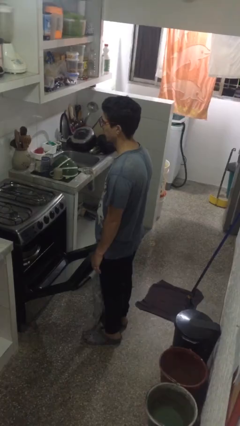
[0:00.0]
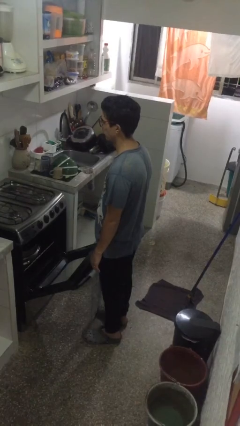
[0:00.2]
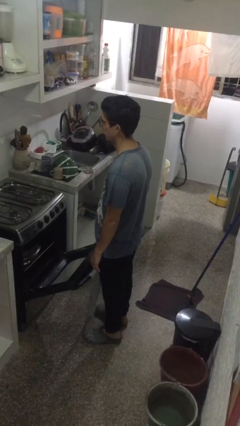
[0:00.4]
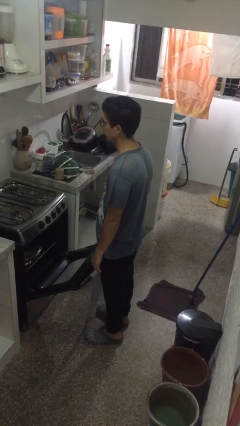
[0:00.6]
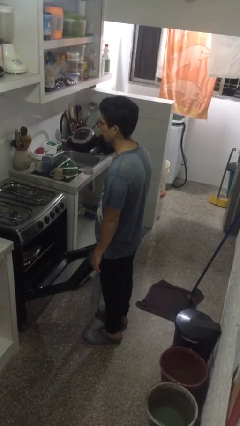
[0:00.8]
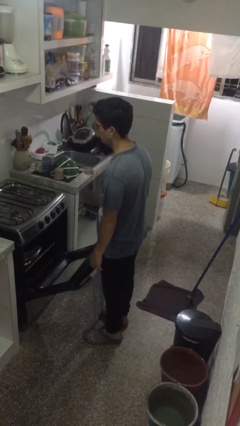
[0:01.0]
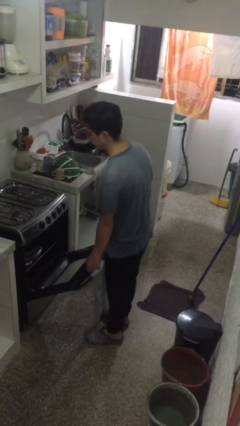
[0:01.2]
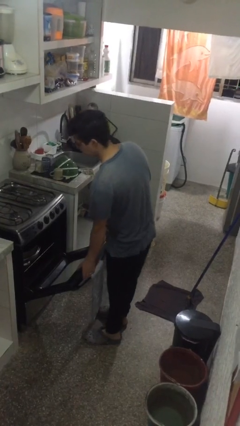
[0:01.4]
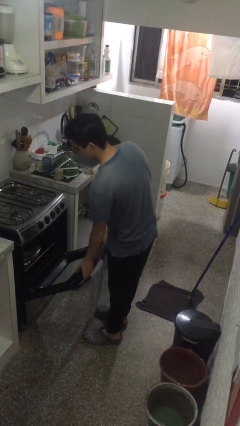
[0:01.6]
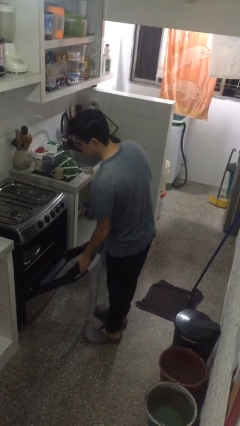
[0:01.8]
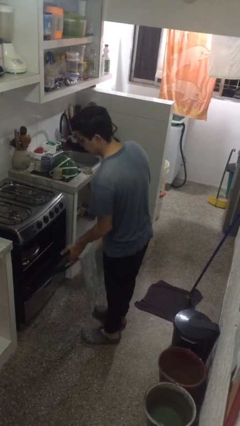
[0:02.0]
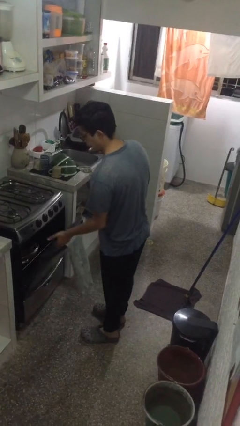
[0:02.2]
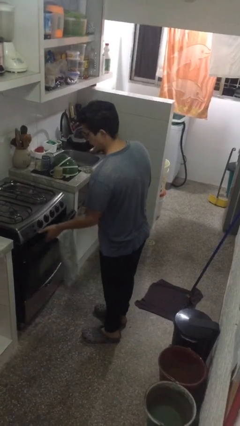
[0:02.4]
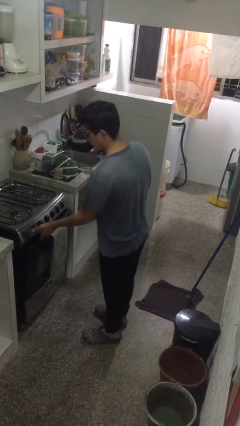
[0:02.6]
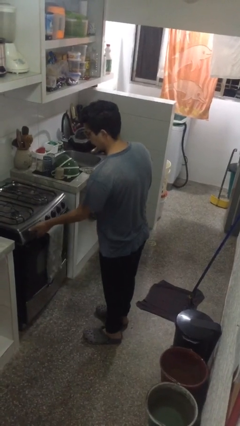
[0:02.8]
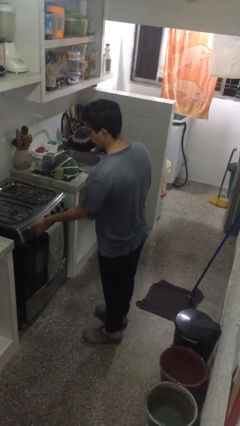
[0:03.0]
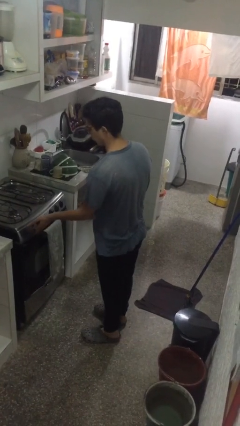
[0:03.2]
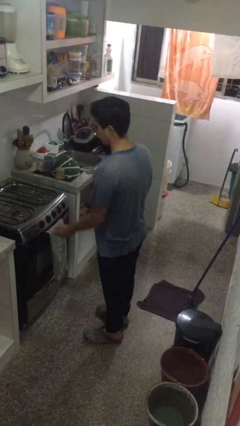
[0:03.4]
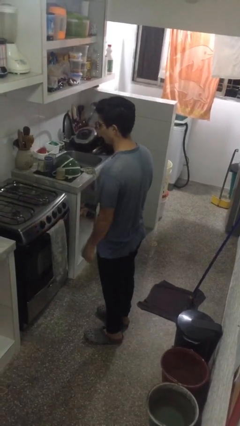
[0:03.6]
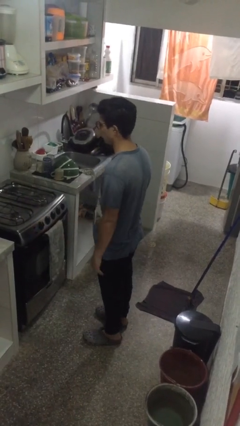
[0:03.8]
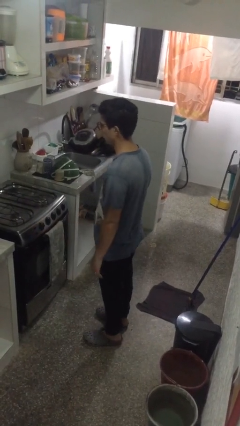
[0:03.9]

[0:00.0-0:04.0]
person closes oven door

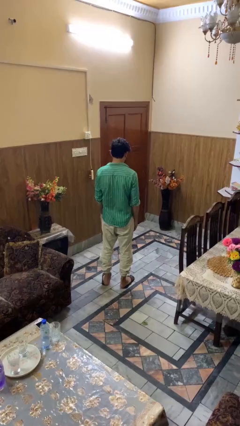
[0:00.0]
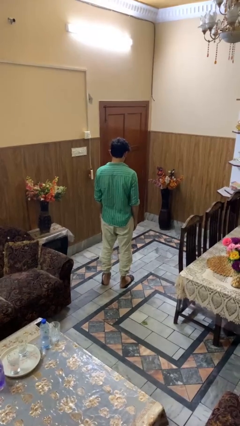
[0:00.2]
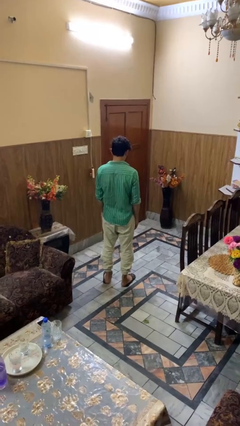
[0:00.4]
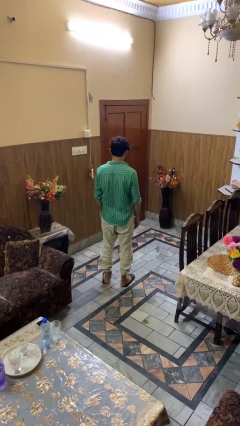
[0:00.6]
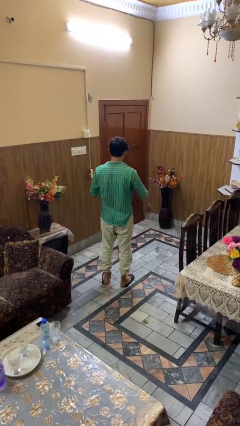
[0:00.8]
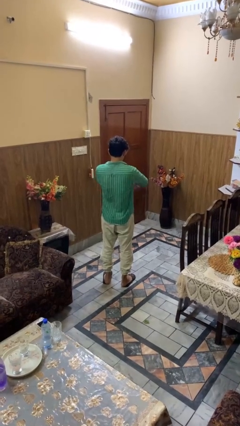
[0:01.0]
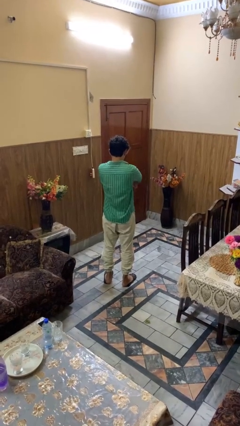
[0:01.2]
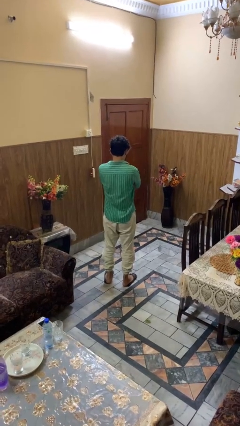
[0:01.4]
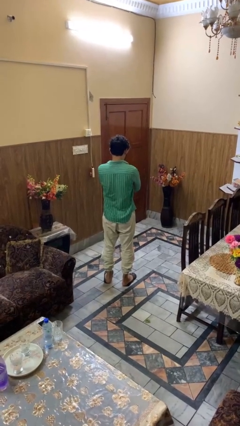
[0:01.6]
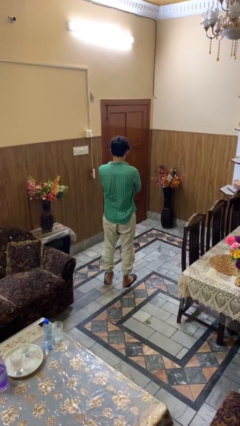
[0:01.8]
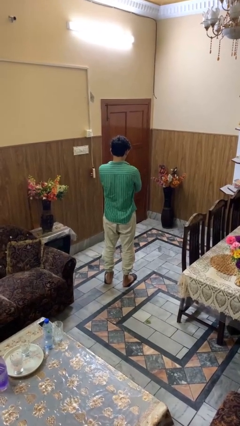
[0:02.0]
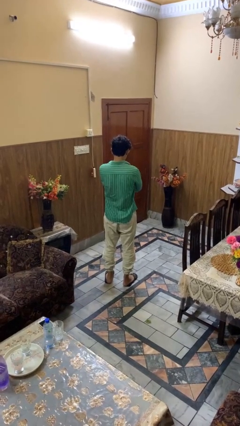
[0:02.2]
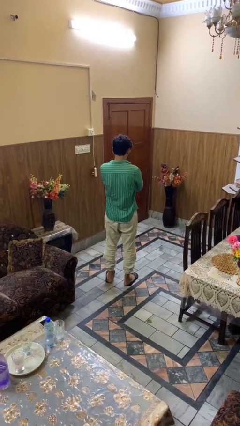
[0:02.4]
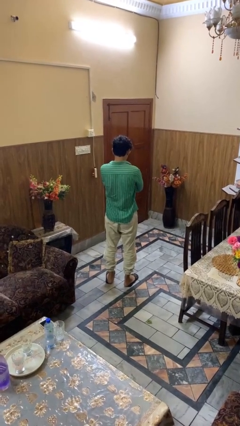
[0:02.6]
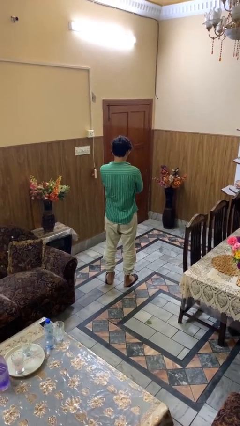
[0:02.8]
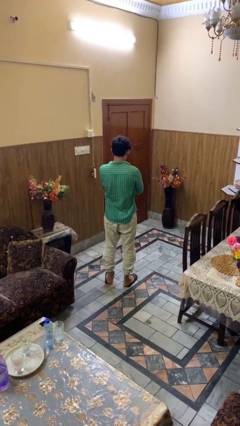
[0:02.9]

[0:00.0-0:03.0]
person crosses arms

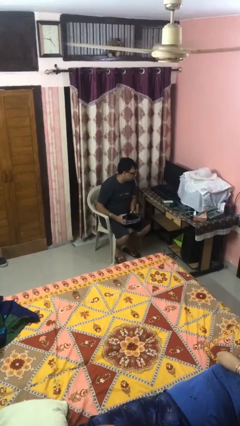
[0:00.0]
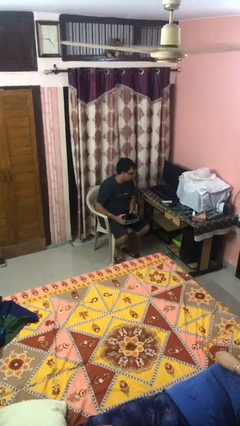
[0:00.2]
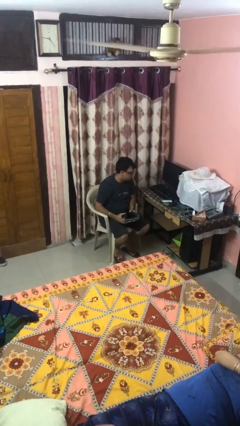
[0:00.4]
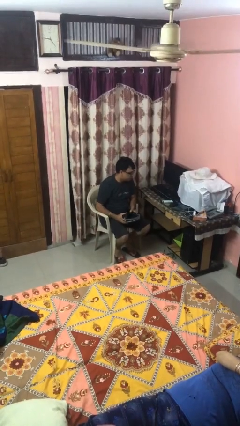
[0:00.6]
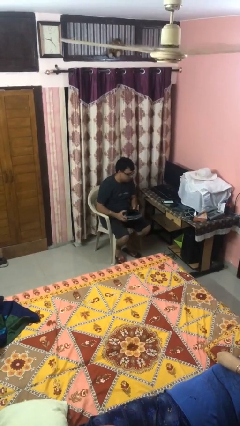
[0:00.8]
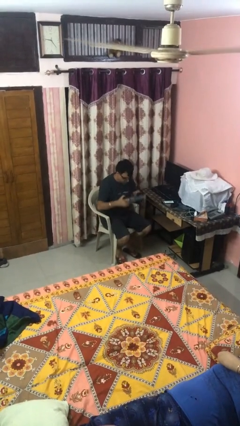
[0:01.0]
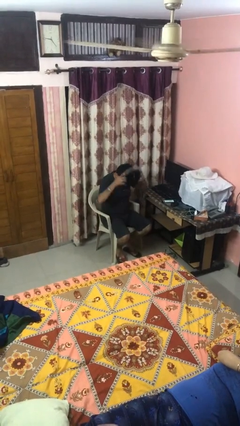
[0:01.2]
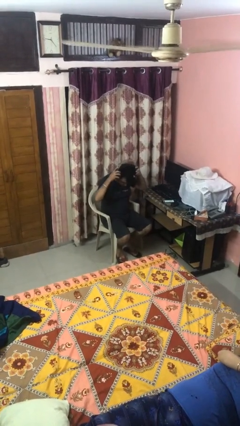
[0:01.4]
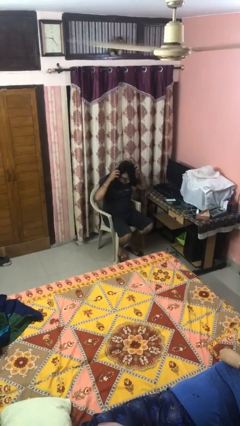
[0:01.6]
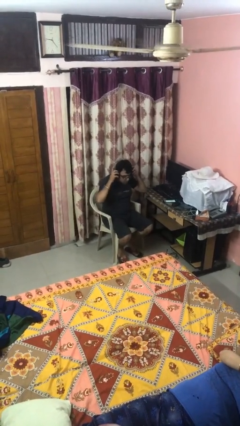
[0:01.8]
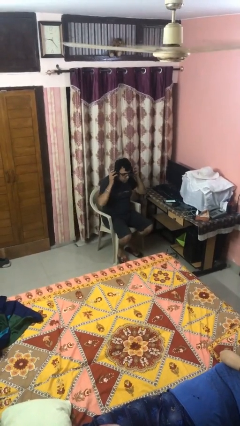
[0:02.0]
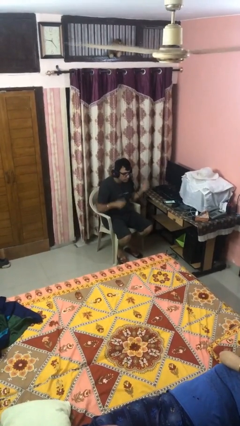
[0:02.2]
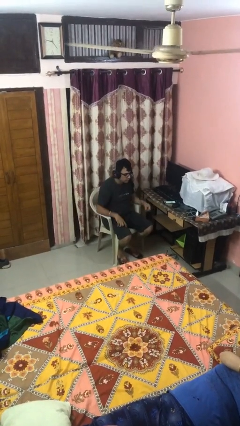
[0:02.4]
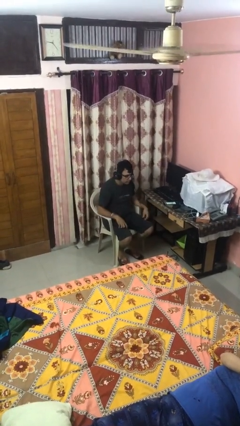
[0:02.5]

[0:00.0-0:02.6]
person puts on headphones

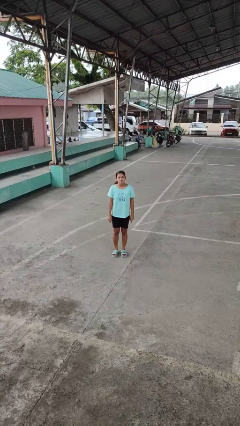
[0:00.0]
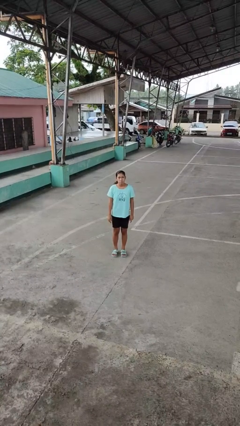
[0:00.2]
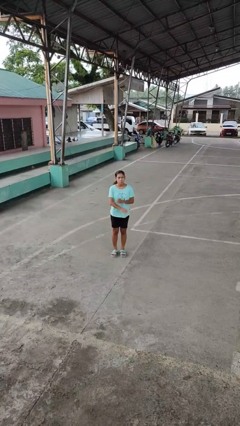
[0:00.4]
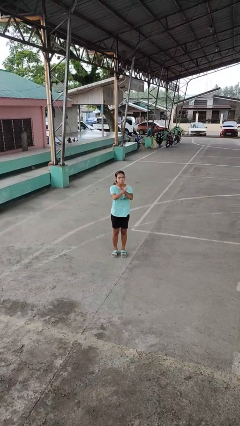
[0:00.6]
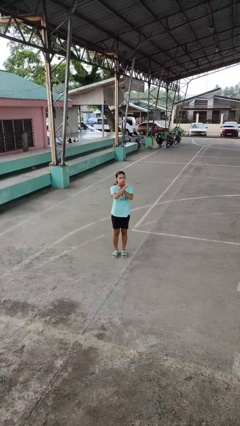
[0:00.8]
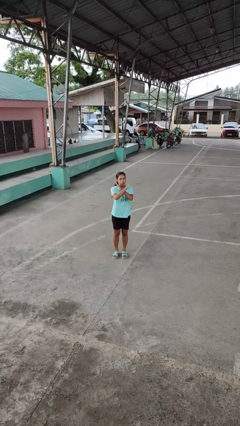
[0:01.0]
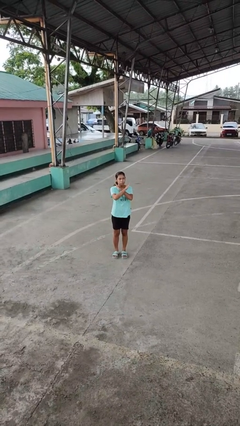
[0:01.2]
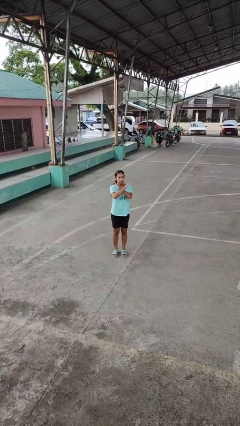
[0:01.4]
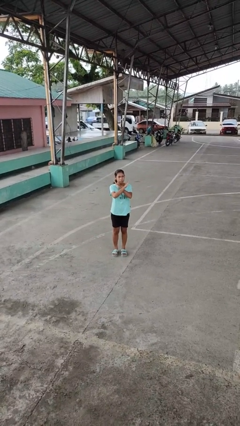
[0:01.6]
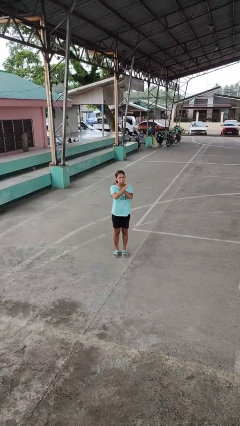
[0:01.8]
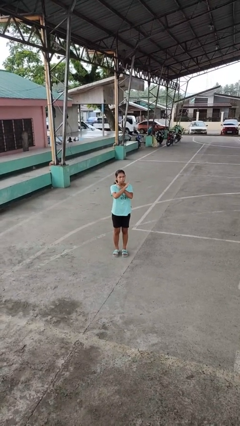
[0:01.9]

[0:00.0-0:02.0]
person gestures arms x

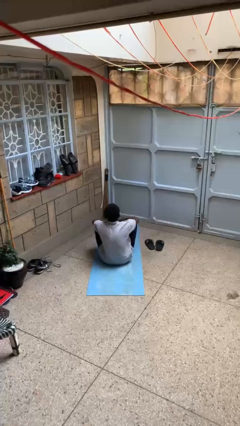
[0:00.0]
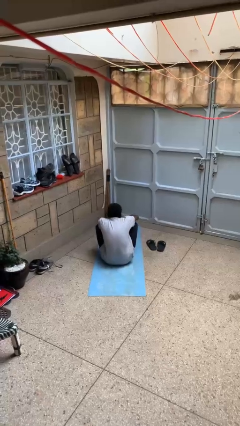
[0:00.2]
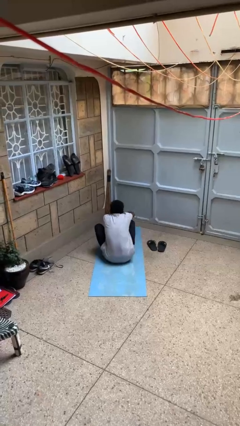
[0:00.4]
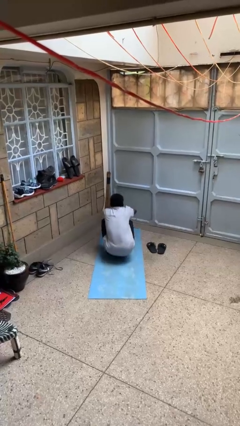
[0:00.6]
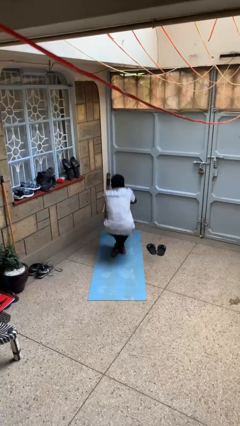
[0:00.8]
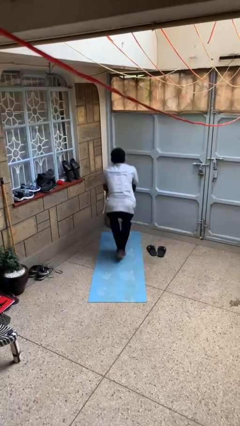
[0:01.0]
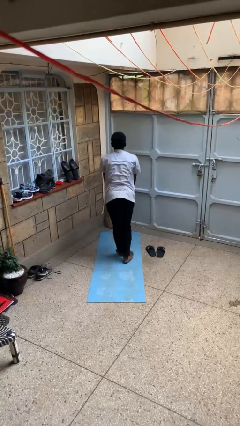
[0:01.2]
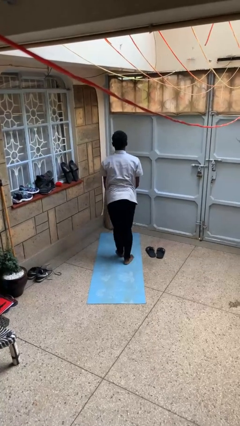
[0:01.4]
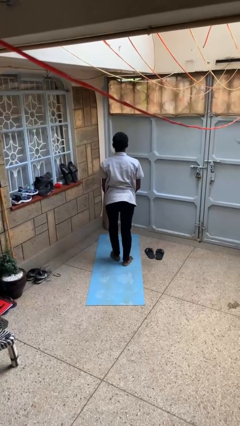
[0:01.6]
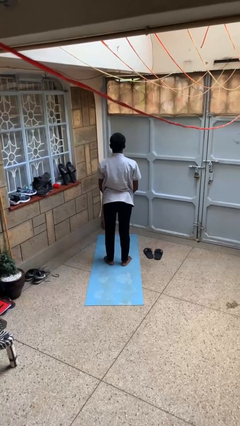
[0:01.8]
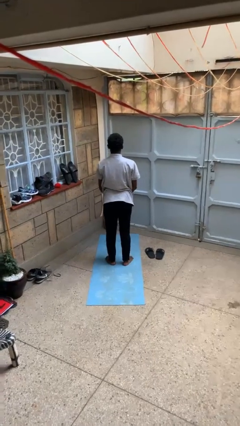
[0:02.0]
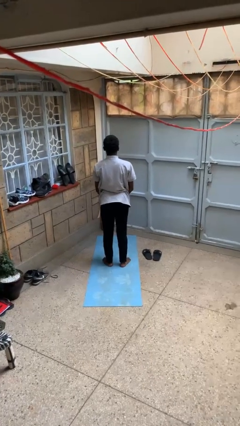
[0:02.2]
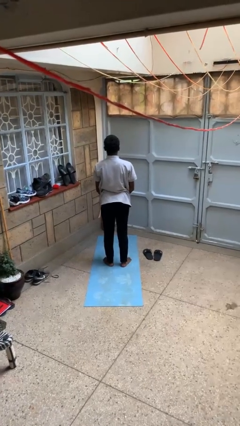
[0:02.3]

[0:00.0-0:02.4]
person stands up from floor

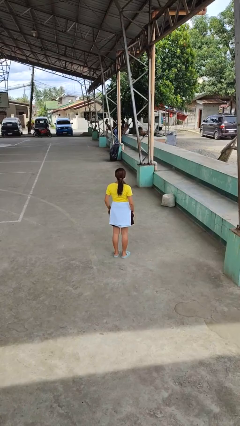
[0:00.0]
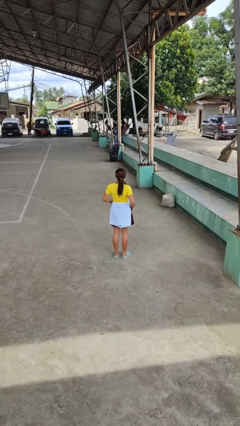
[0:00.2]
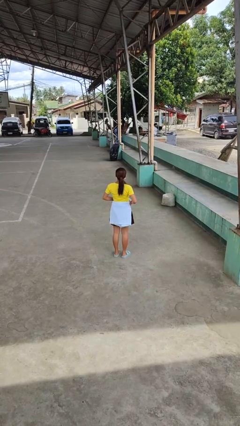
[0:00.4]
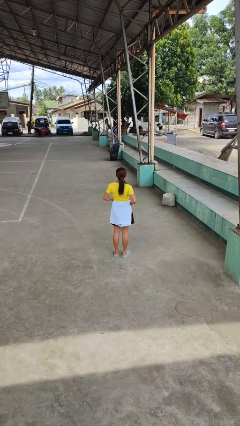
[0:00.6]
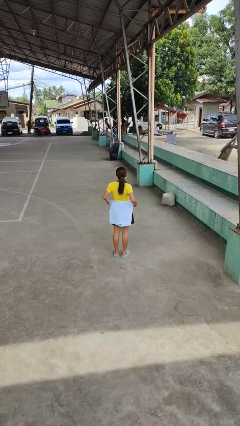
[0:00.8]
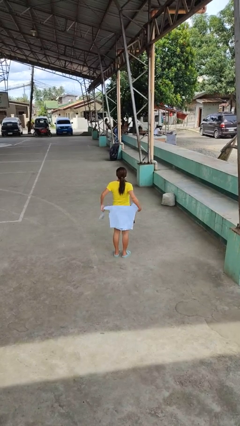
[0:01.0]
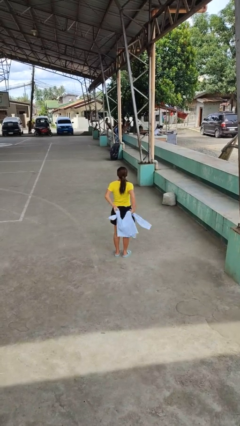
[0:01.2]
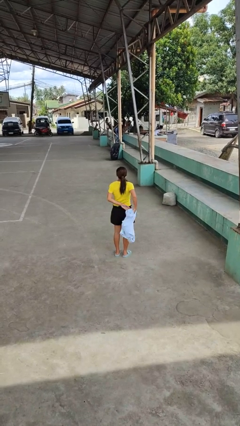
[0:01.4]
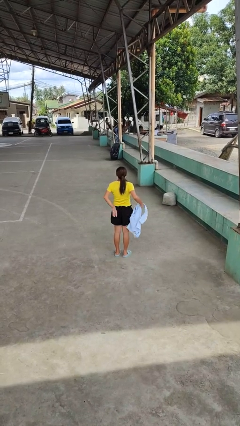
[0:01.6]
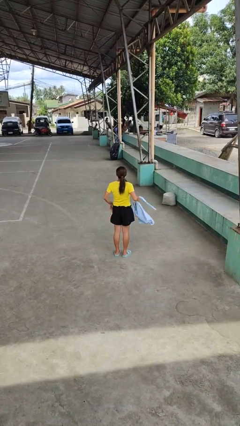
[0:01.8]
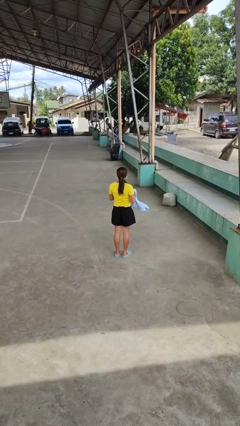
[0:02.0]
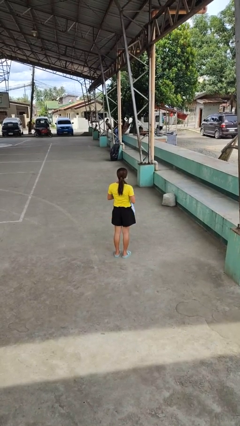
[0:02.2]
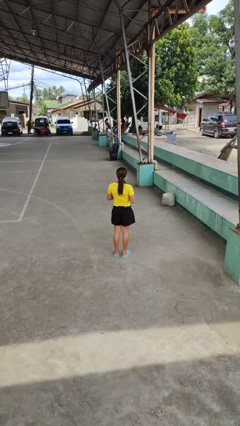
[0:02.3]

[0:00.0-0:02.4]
person unties jacket around waist

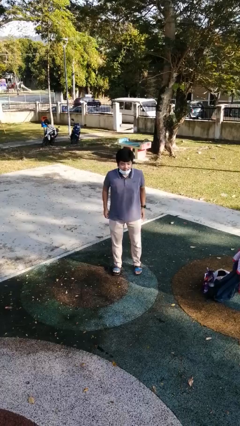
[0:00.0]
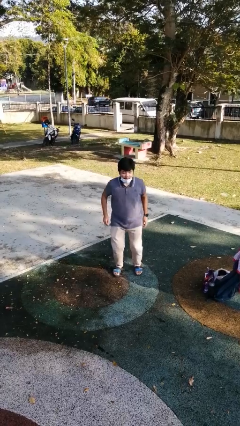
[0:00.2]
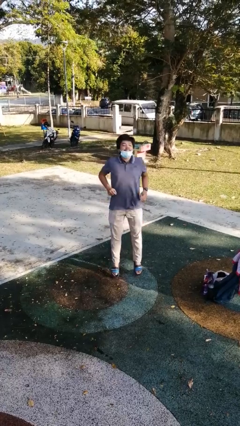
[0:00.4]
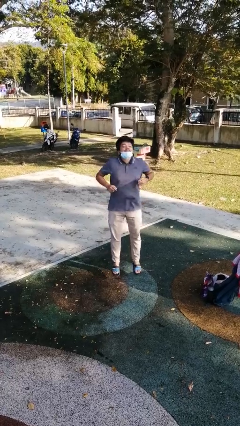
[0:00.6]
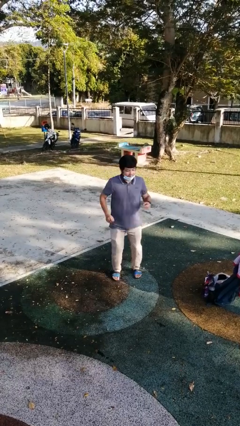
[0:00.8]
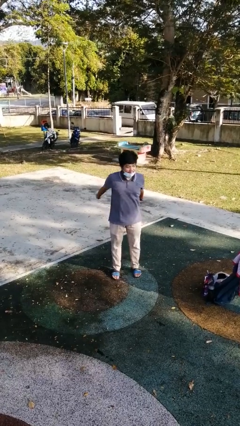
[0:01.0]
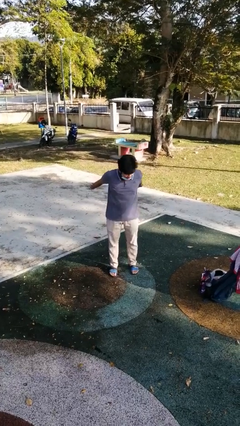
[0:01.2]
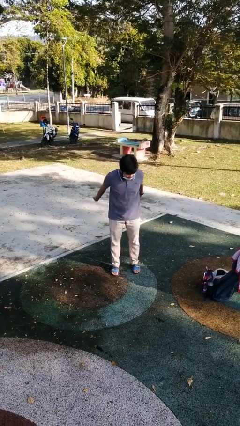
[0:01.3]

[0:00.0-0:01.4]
person jumps
